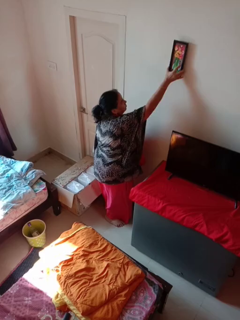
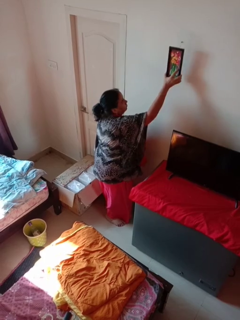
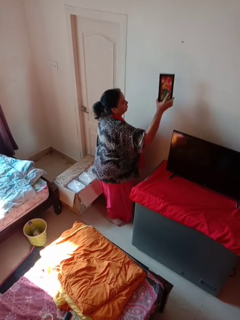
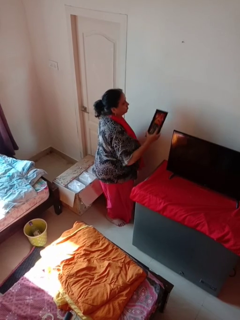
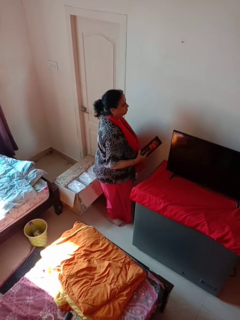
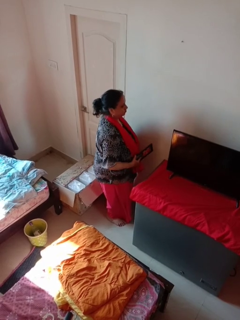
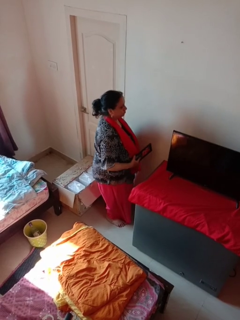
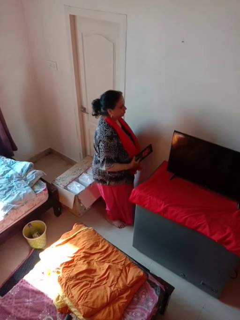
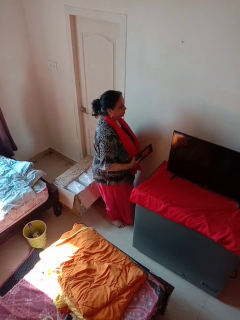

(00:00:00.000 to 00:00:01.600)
person takes down picture frame

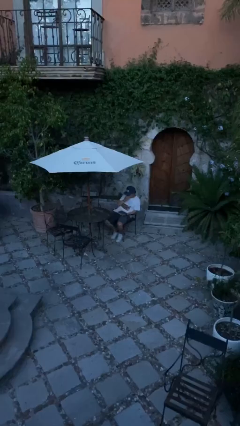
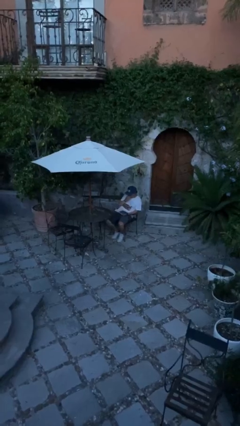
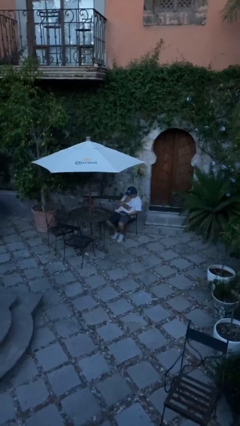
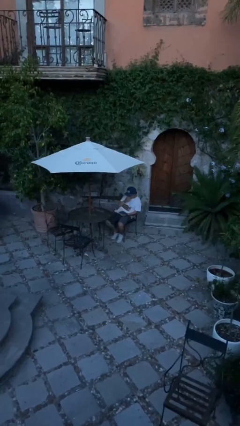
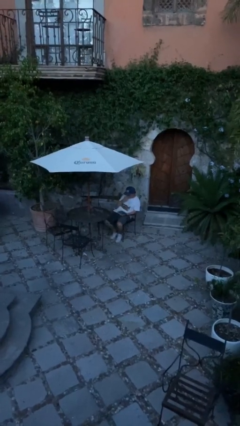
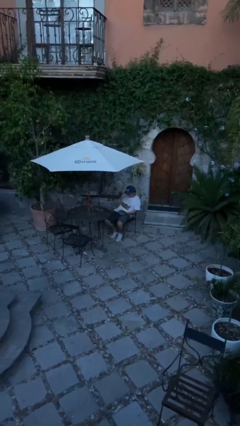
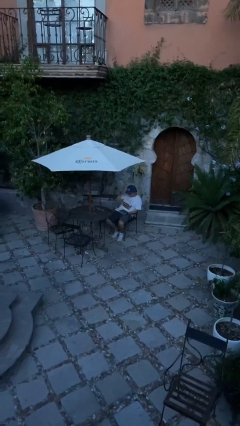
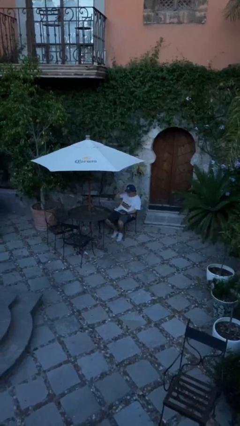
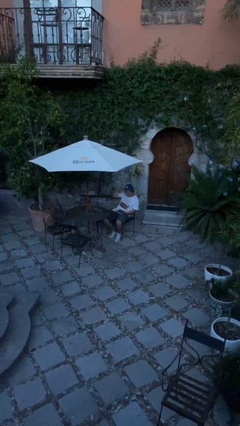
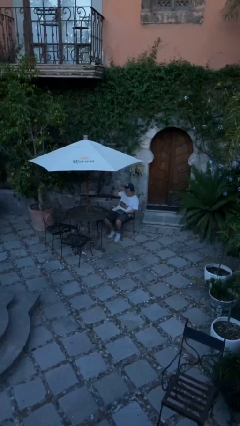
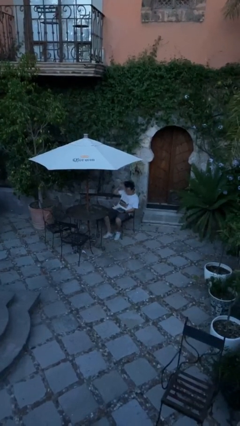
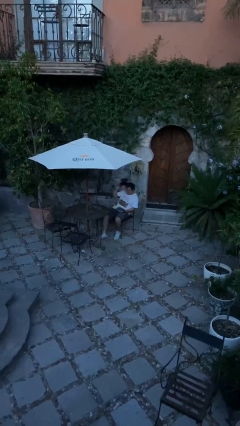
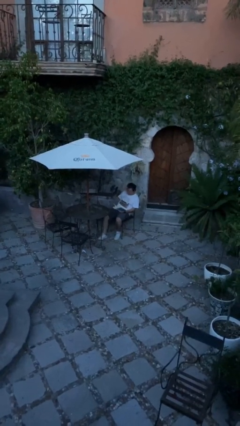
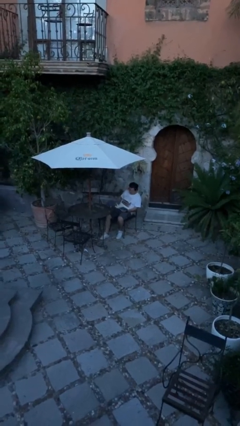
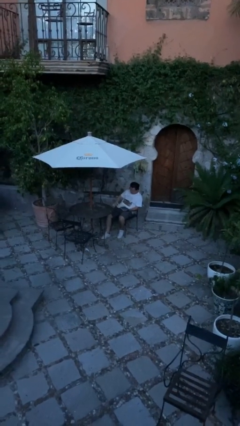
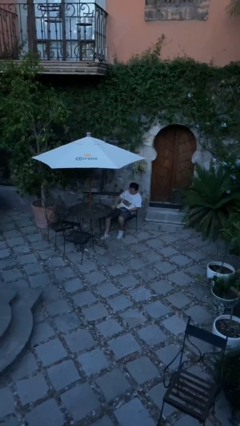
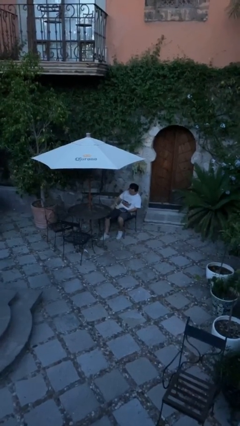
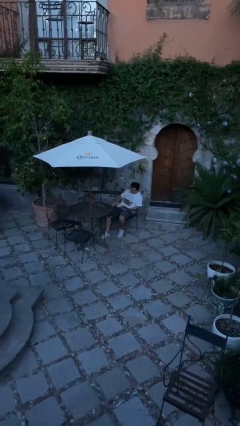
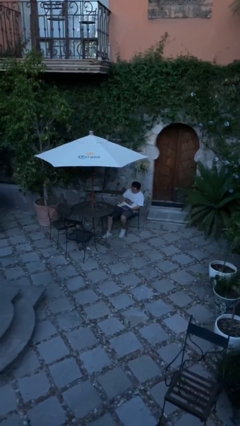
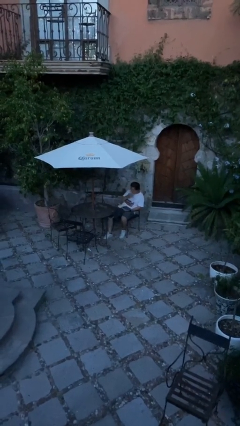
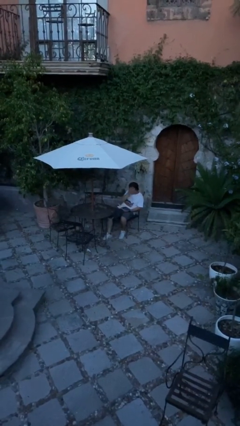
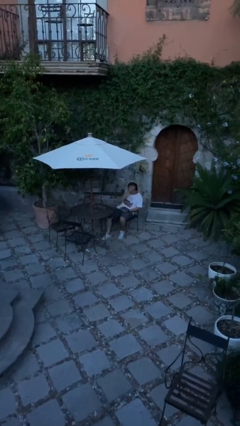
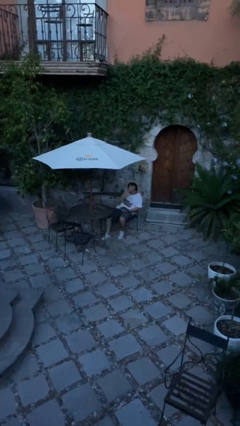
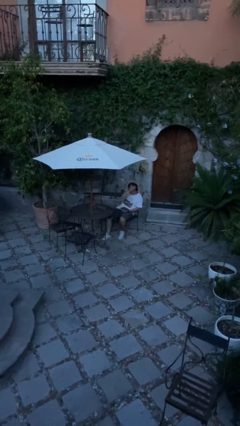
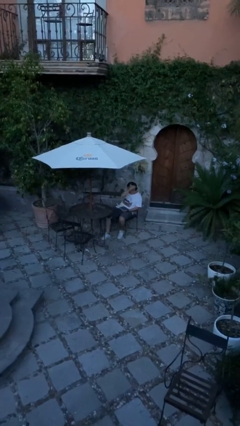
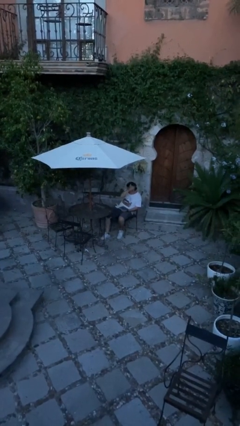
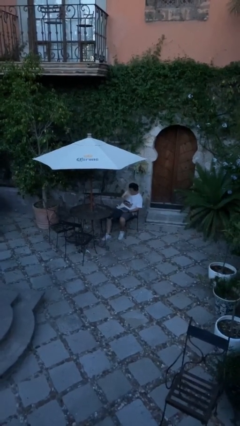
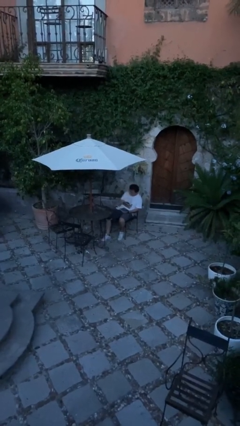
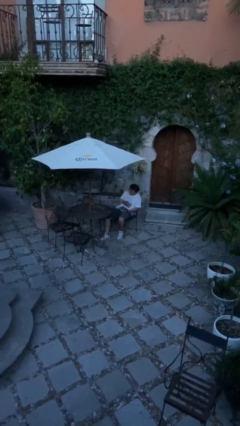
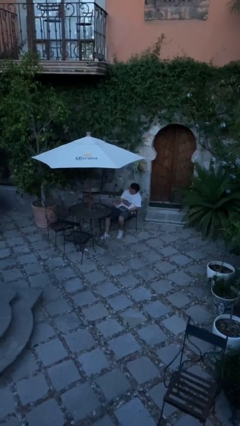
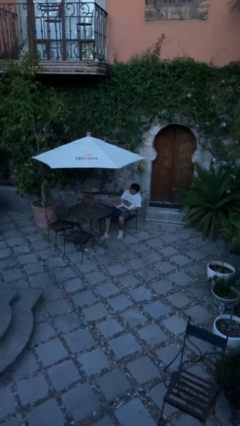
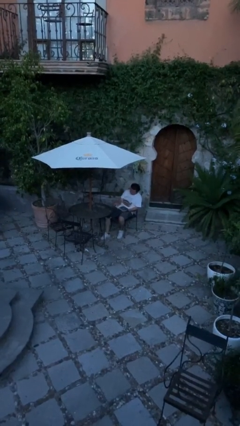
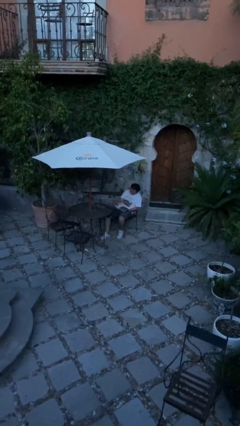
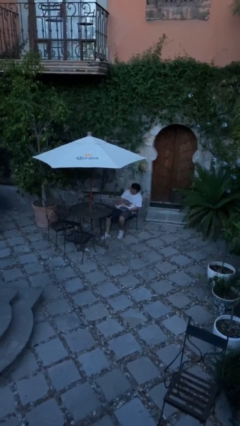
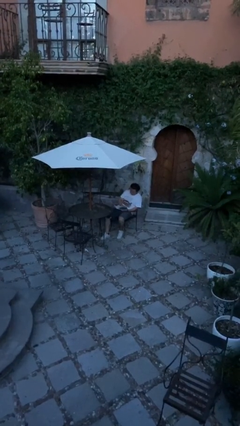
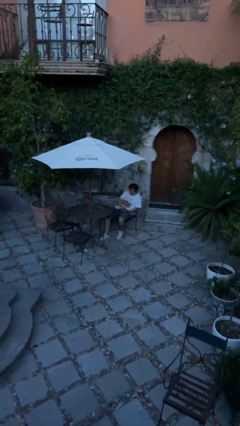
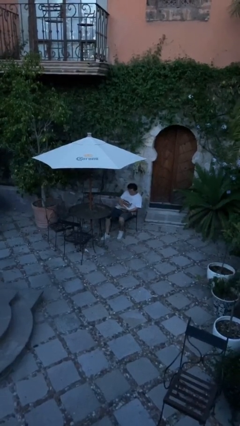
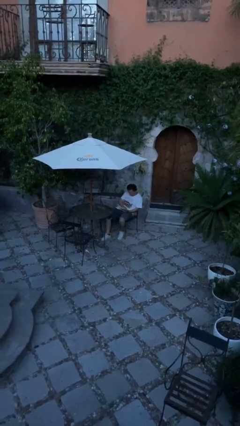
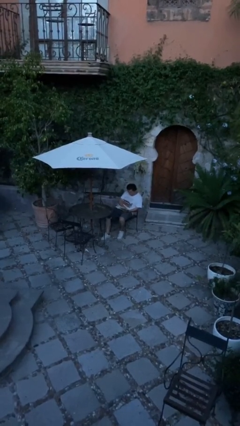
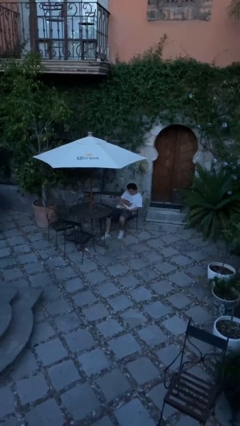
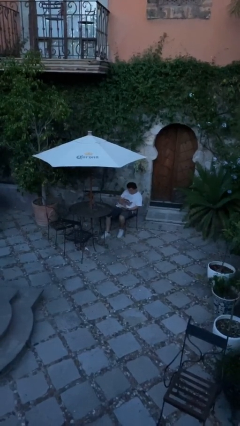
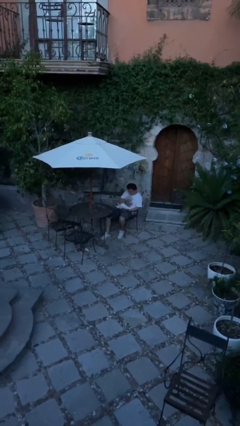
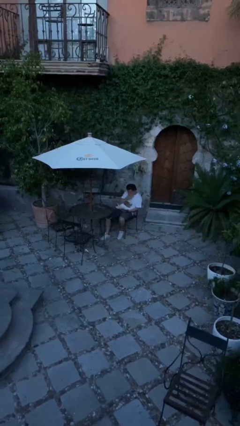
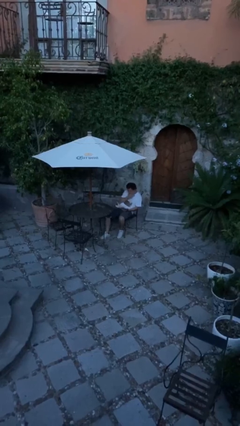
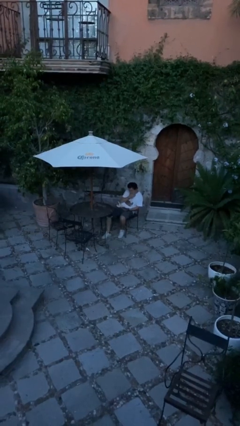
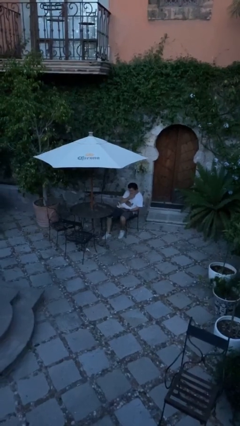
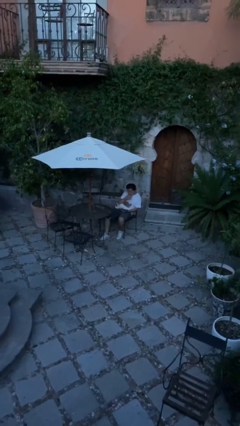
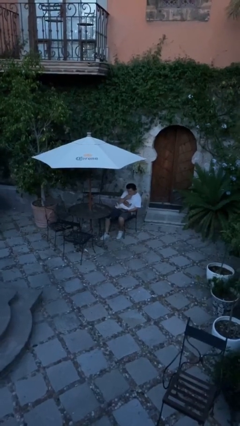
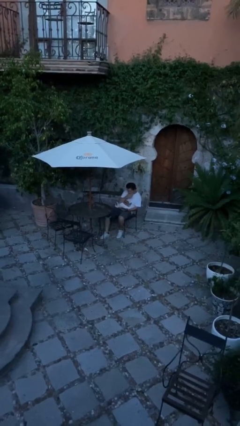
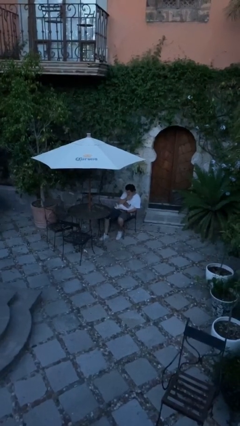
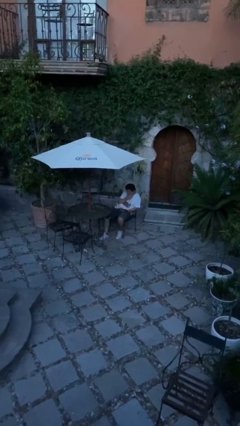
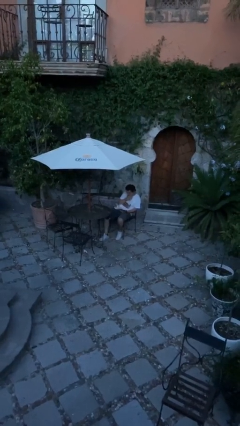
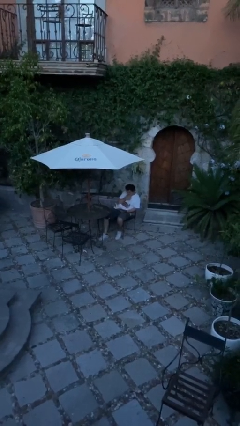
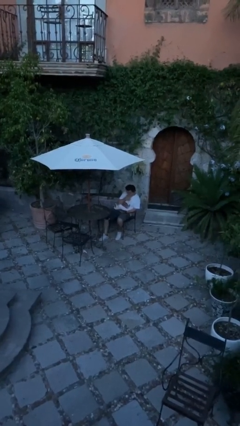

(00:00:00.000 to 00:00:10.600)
person reads document

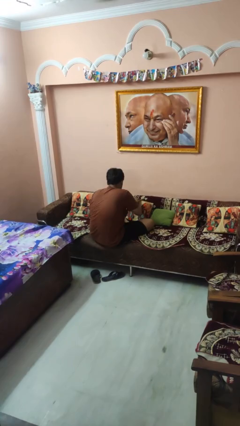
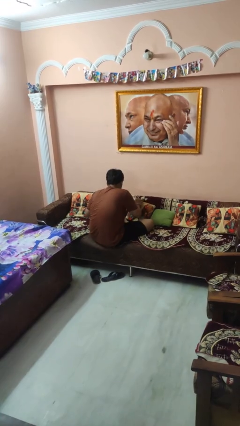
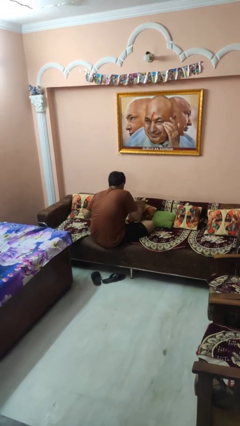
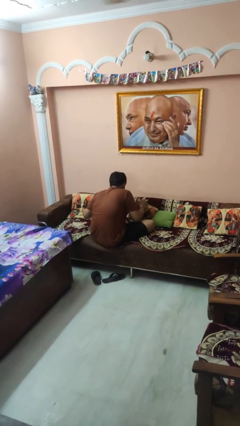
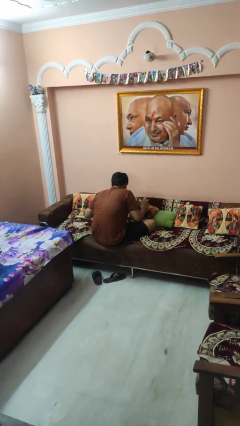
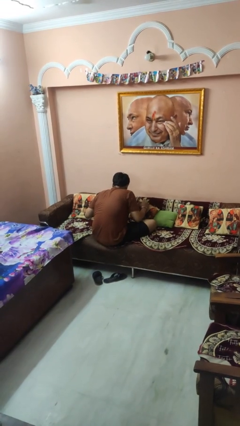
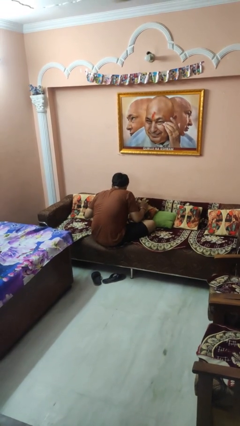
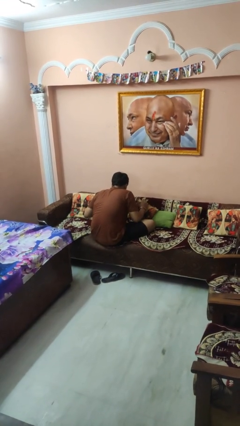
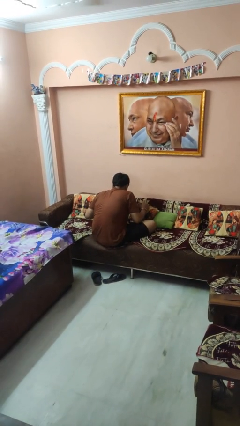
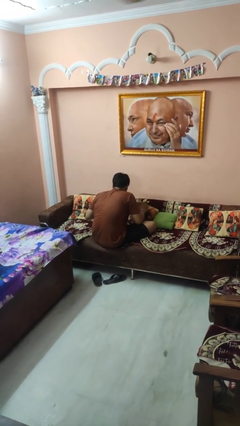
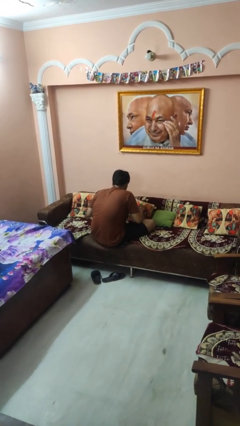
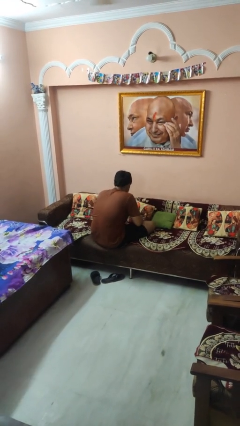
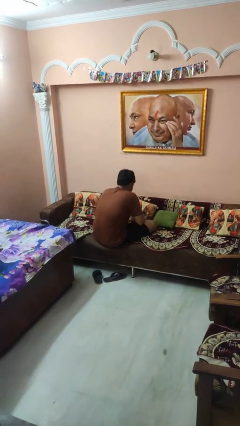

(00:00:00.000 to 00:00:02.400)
person searches in couch

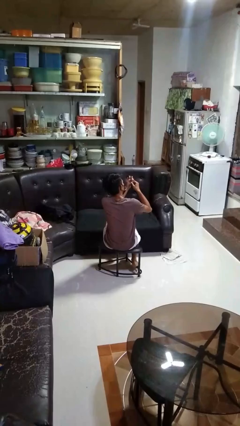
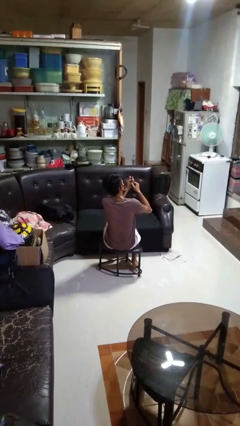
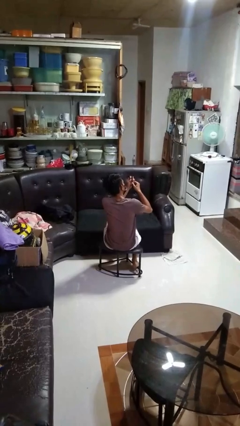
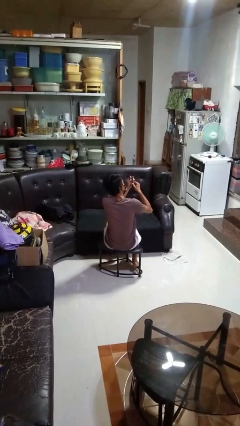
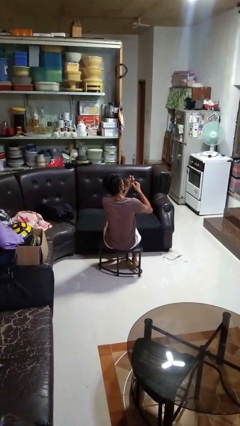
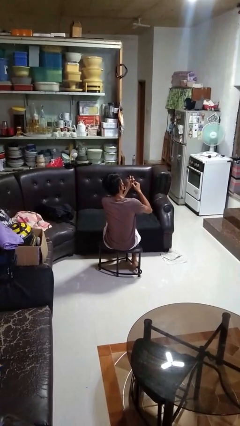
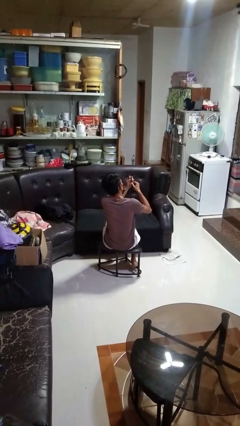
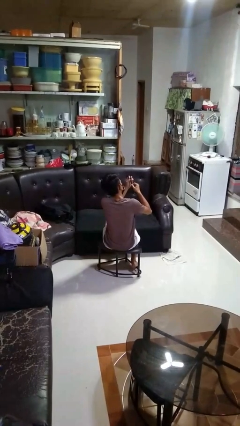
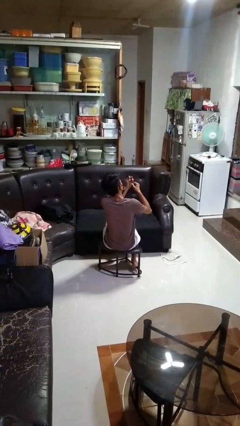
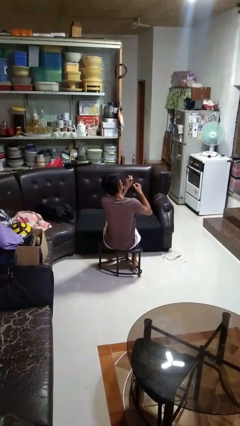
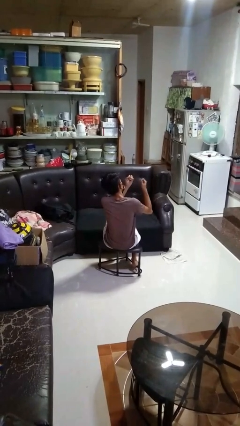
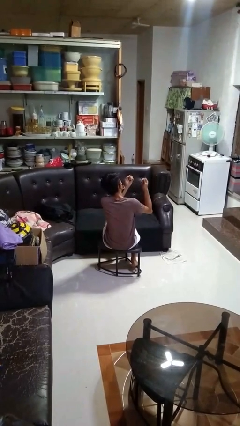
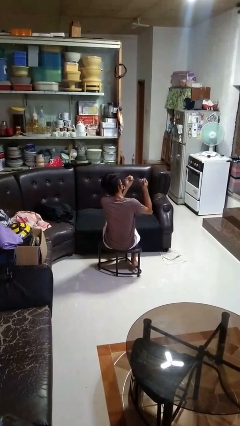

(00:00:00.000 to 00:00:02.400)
person files fingernails

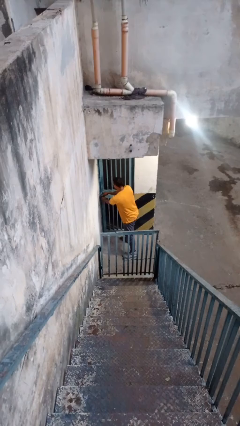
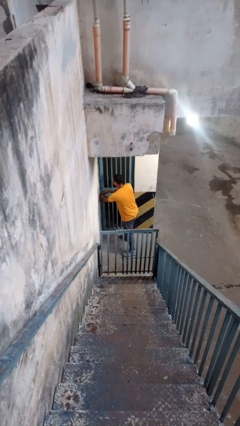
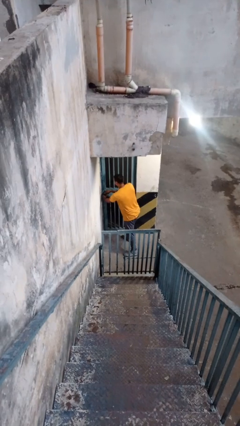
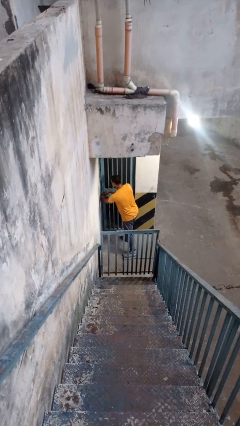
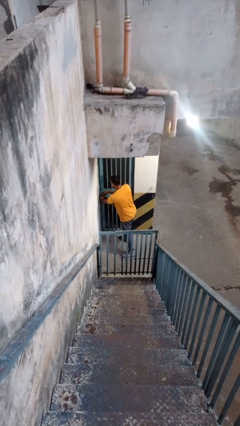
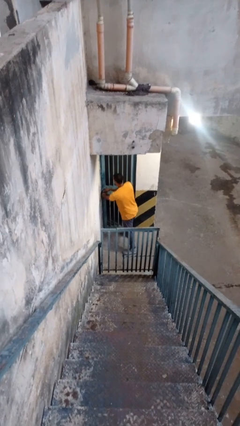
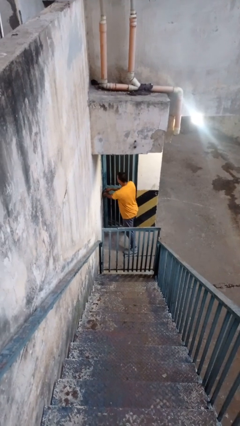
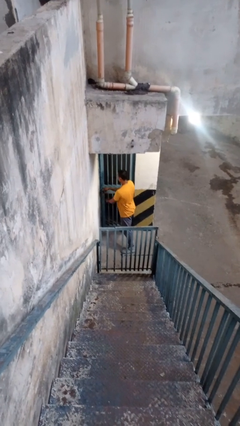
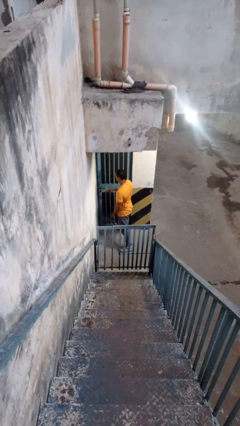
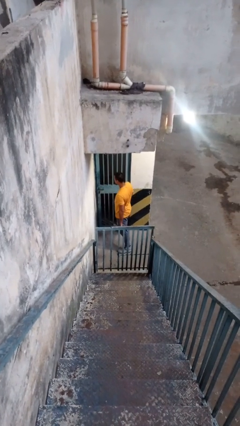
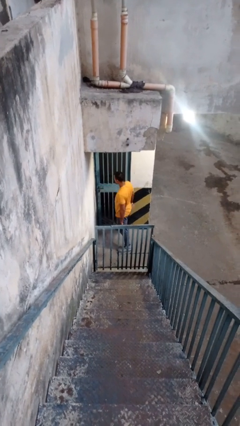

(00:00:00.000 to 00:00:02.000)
person locks door with keys
